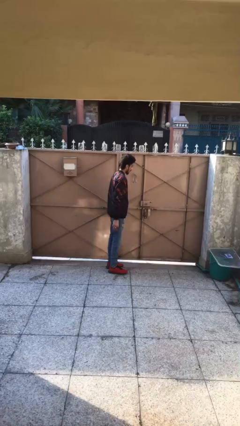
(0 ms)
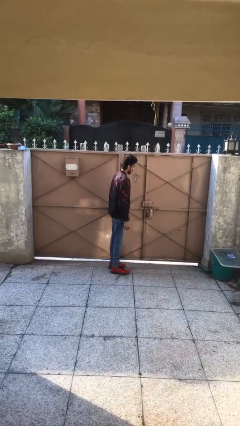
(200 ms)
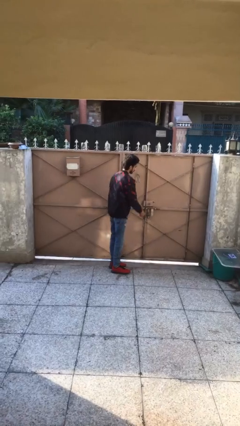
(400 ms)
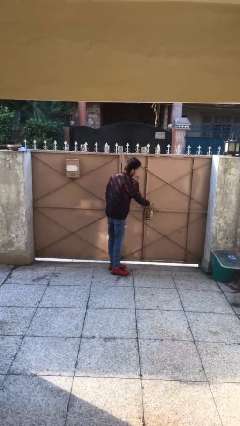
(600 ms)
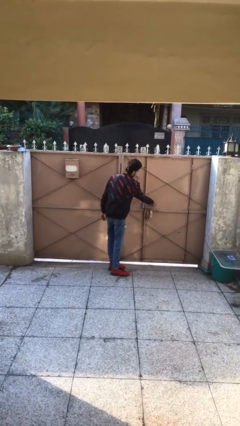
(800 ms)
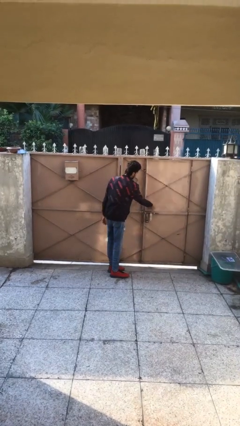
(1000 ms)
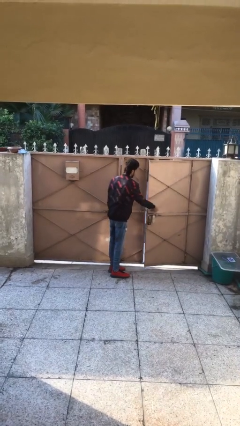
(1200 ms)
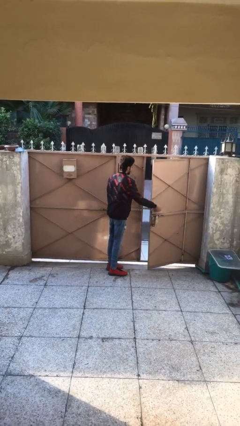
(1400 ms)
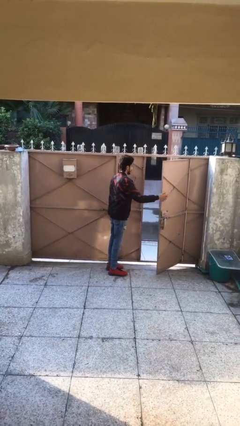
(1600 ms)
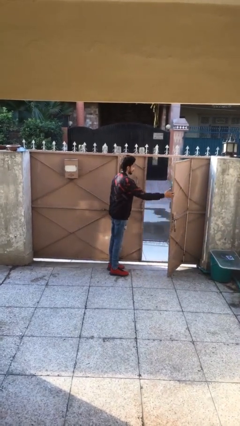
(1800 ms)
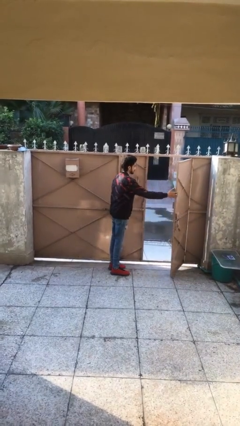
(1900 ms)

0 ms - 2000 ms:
person opens facility door

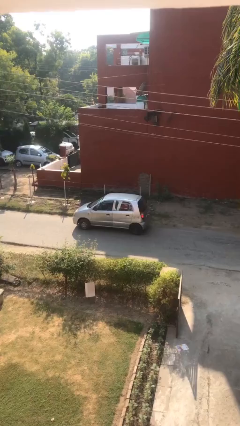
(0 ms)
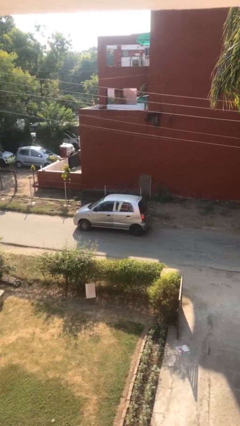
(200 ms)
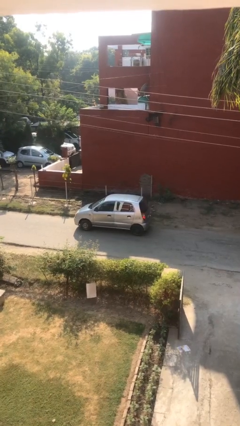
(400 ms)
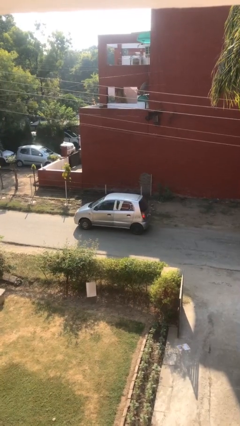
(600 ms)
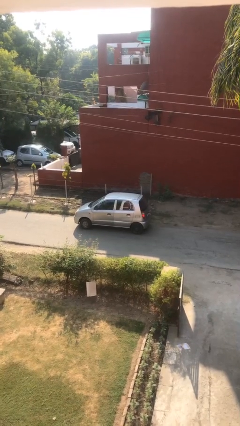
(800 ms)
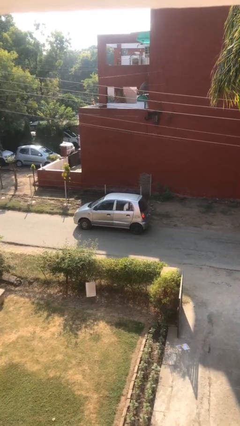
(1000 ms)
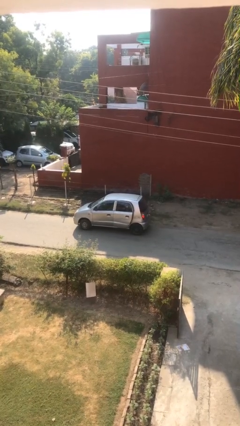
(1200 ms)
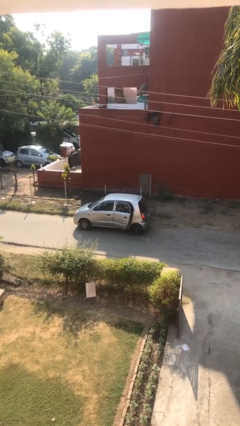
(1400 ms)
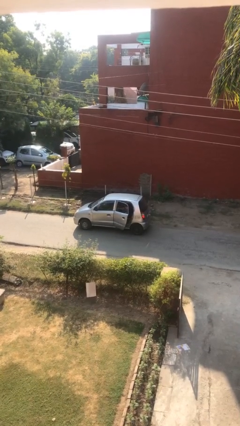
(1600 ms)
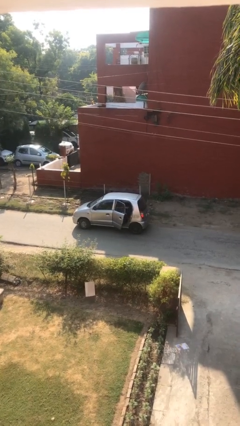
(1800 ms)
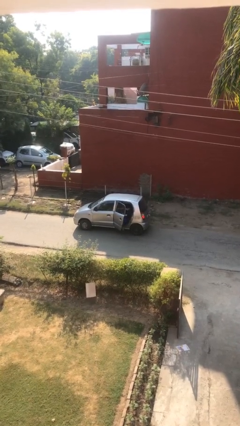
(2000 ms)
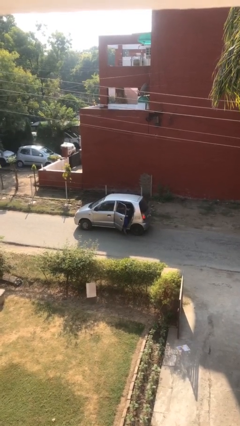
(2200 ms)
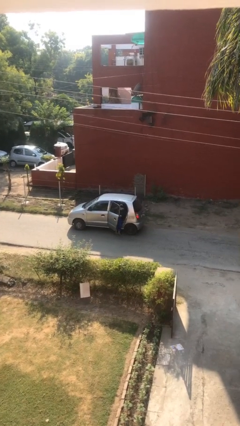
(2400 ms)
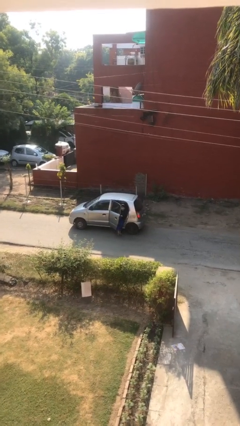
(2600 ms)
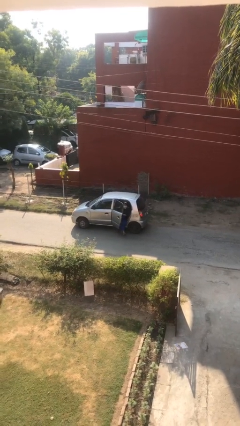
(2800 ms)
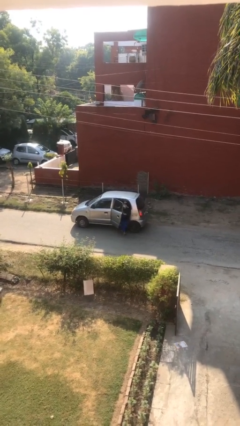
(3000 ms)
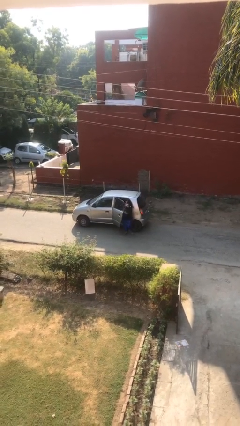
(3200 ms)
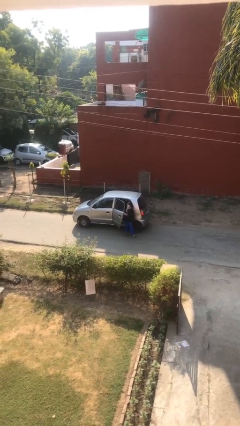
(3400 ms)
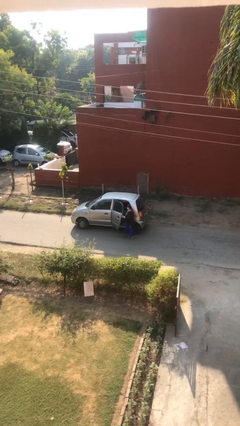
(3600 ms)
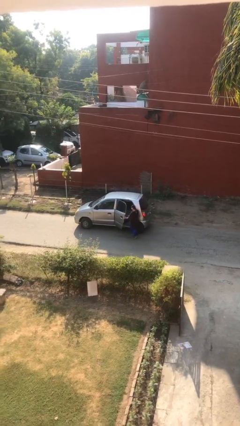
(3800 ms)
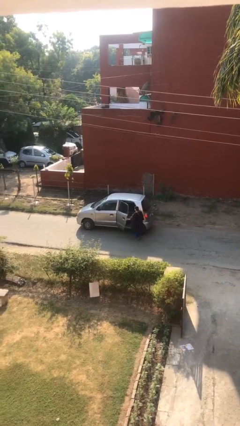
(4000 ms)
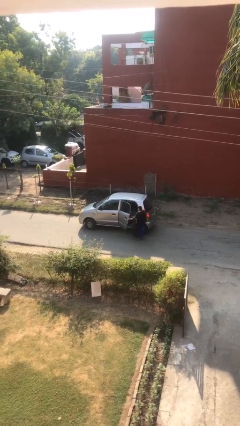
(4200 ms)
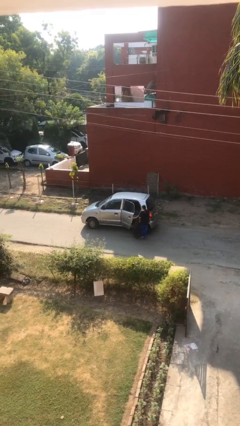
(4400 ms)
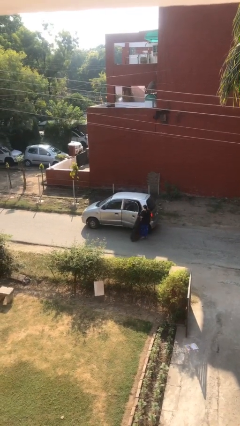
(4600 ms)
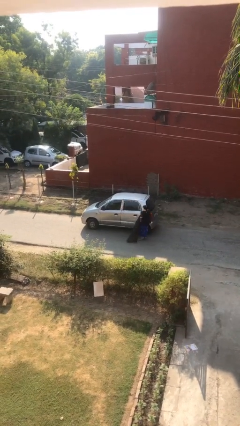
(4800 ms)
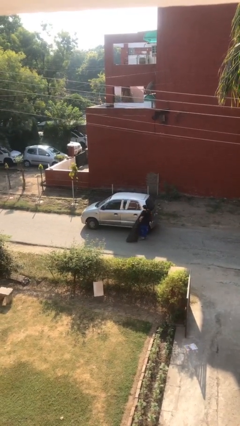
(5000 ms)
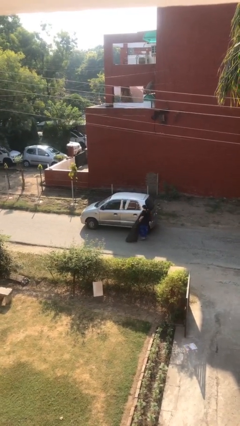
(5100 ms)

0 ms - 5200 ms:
car drops off person

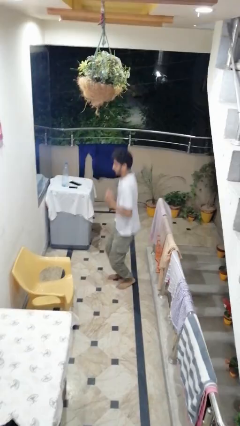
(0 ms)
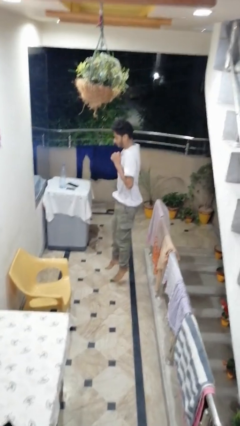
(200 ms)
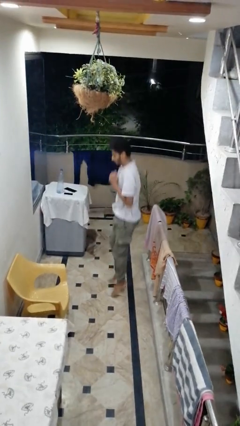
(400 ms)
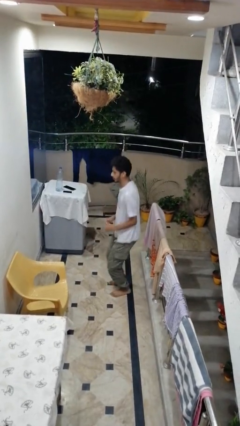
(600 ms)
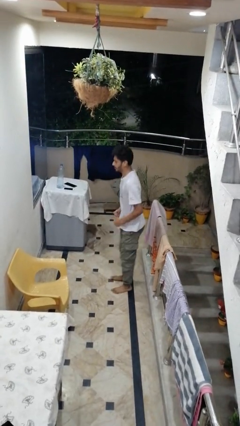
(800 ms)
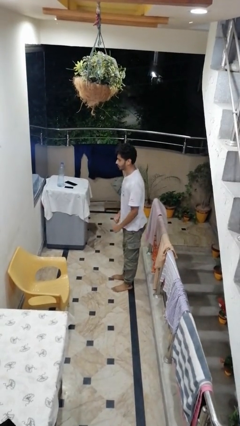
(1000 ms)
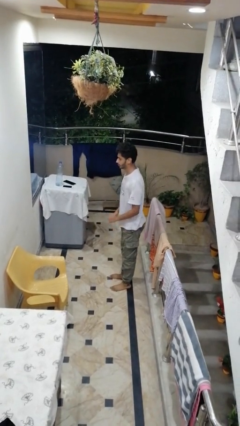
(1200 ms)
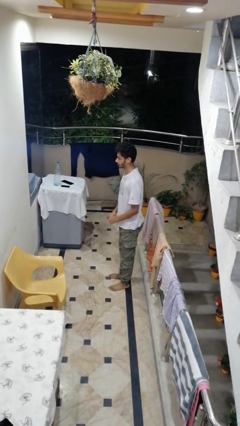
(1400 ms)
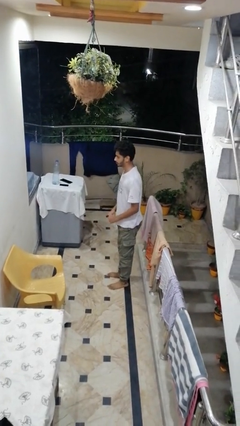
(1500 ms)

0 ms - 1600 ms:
person jumps

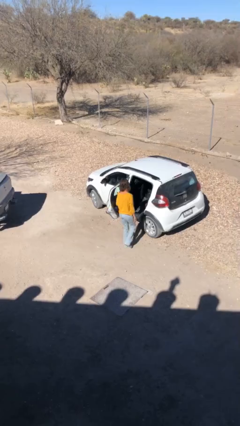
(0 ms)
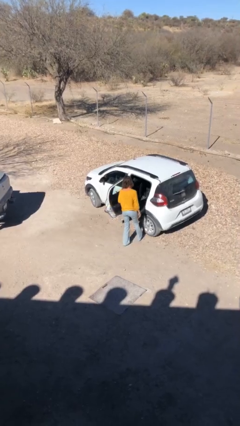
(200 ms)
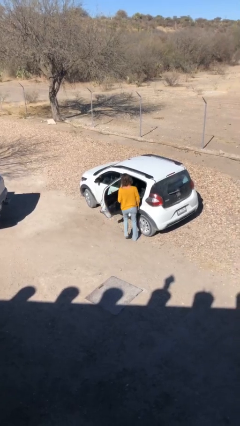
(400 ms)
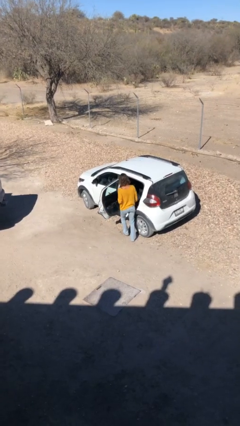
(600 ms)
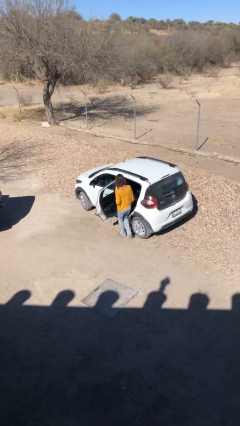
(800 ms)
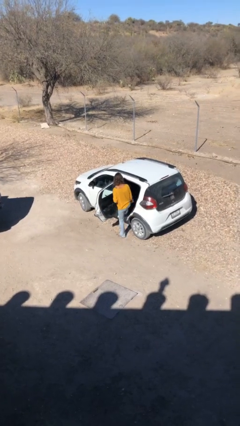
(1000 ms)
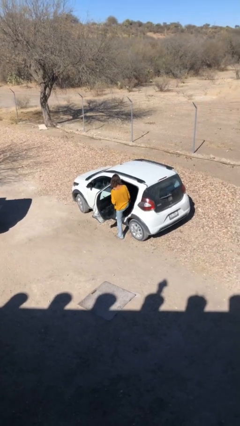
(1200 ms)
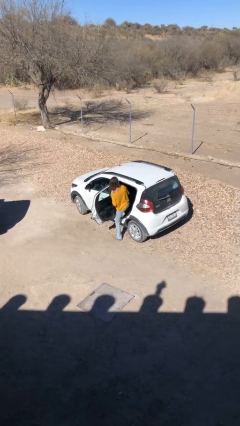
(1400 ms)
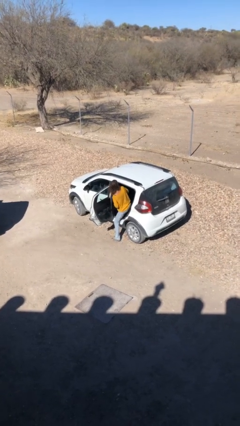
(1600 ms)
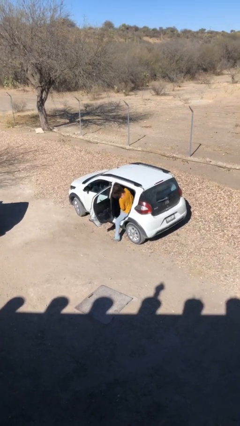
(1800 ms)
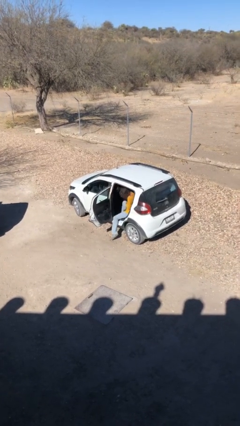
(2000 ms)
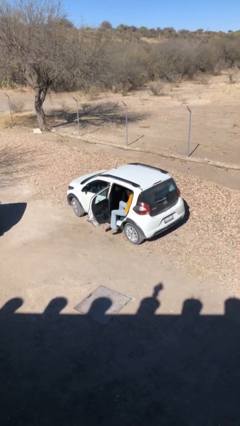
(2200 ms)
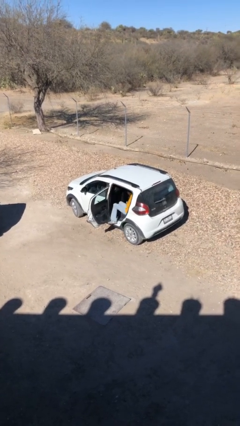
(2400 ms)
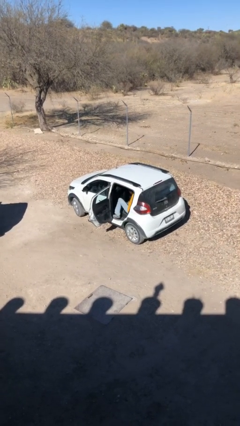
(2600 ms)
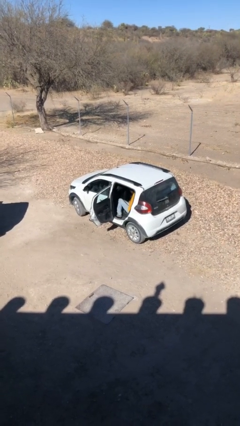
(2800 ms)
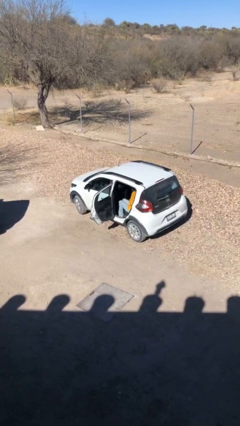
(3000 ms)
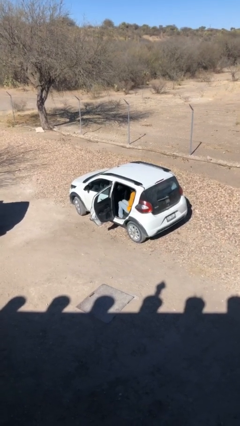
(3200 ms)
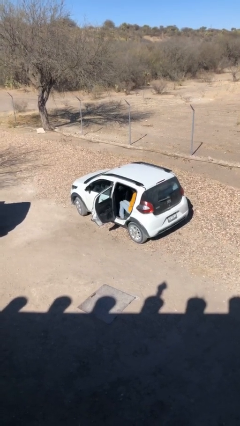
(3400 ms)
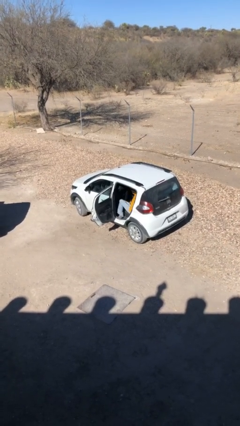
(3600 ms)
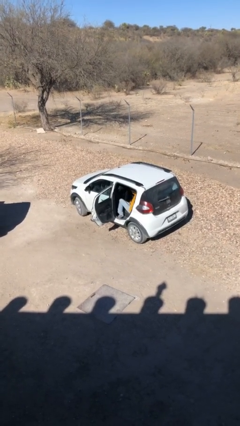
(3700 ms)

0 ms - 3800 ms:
person exits car

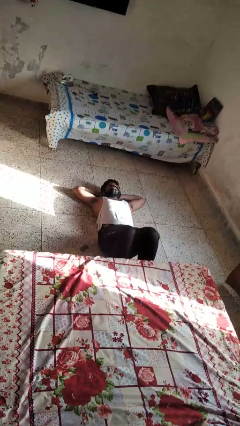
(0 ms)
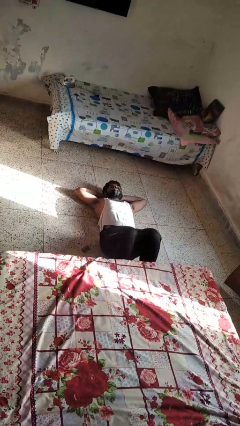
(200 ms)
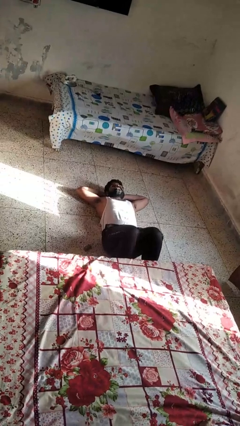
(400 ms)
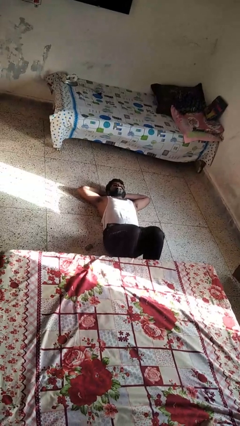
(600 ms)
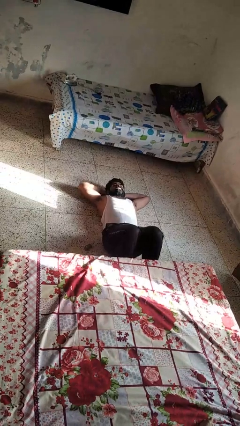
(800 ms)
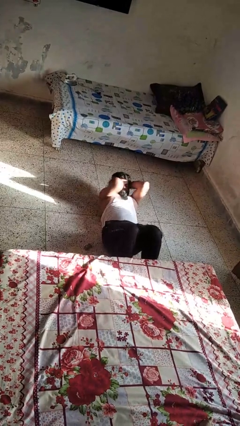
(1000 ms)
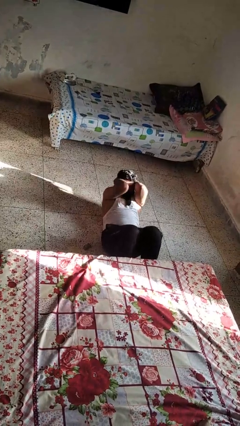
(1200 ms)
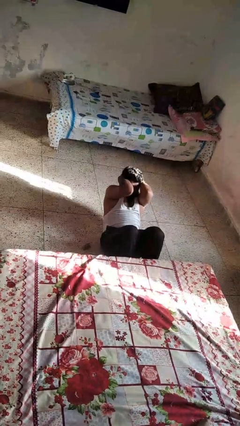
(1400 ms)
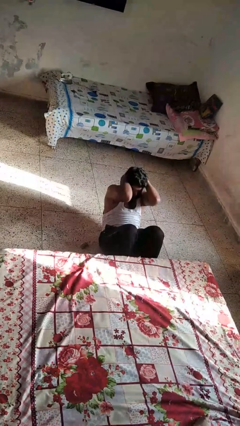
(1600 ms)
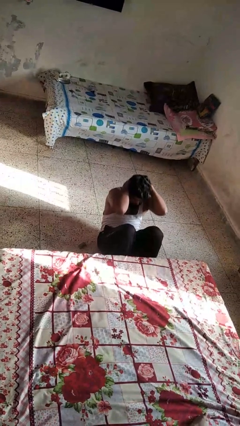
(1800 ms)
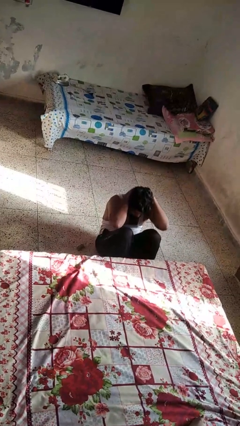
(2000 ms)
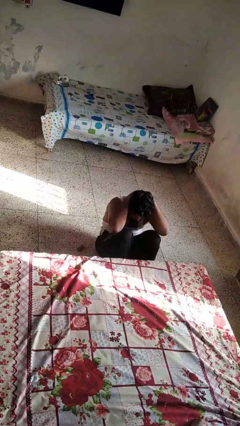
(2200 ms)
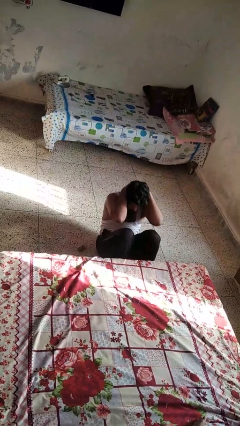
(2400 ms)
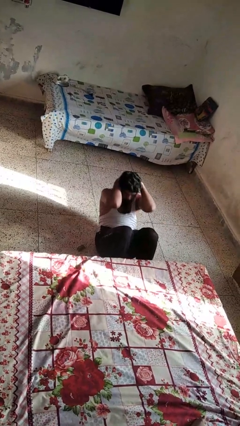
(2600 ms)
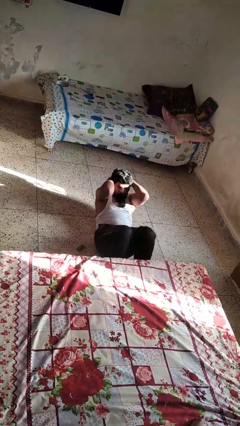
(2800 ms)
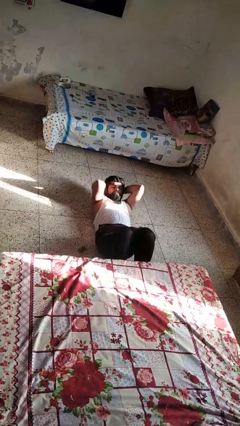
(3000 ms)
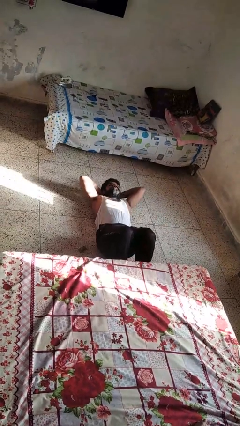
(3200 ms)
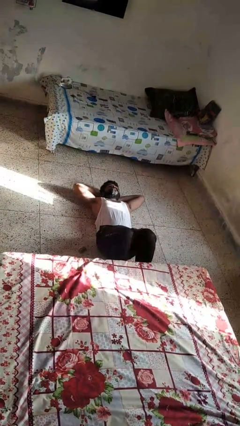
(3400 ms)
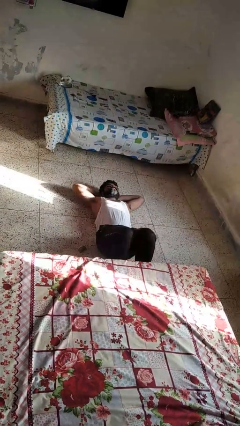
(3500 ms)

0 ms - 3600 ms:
person exercises with situp

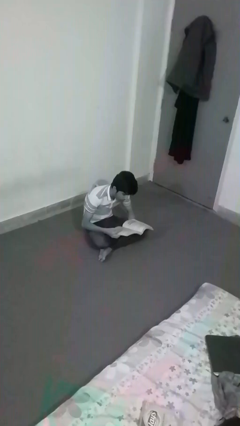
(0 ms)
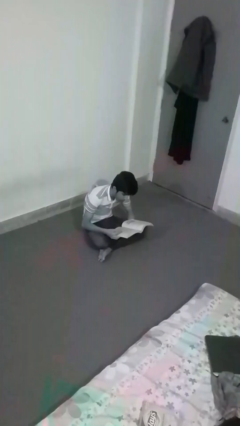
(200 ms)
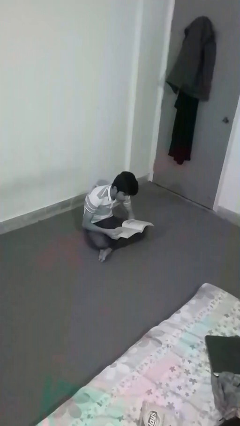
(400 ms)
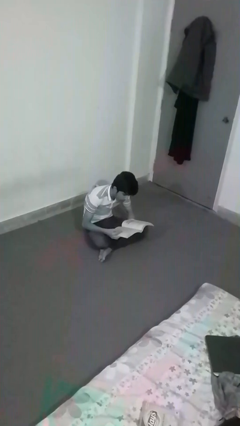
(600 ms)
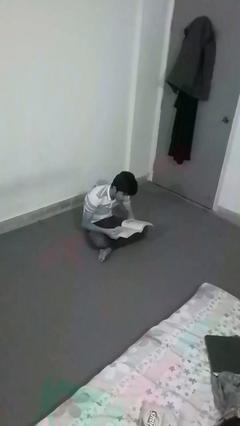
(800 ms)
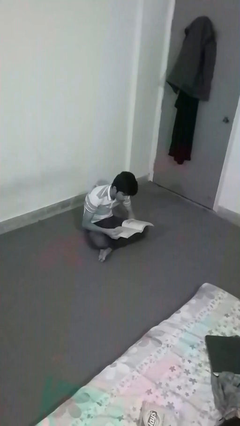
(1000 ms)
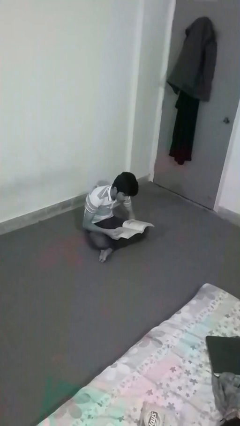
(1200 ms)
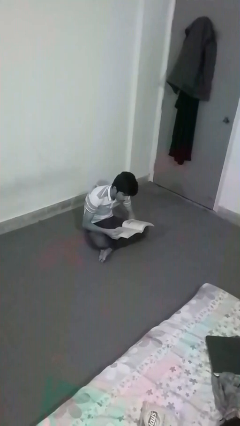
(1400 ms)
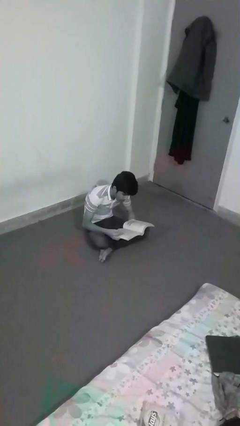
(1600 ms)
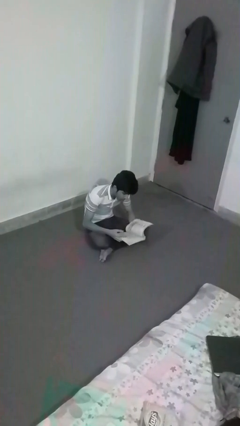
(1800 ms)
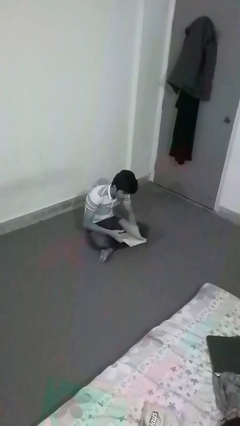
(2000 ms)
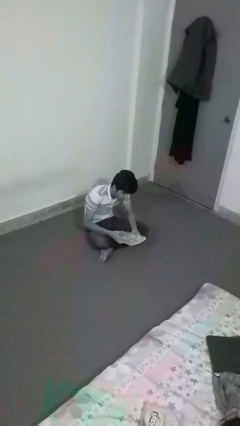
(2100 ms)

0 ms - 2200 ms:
person reads document
